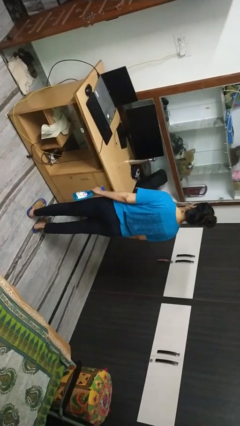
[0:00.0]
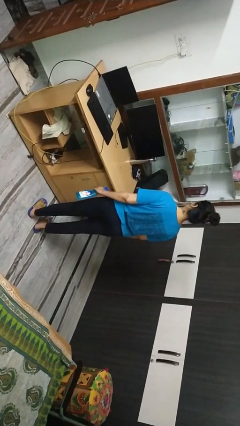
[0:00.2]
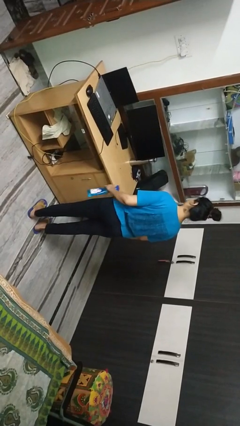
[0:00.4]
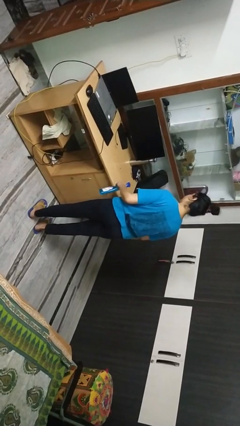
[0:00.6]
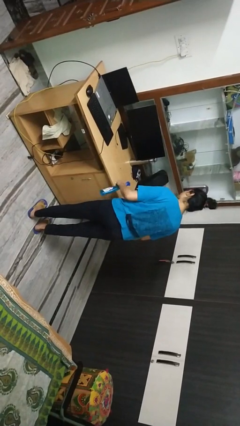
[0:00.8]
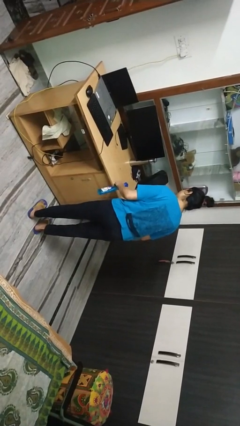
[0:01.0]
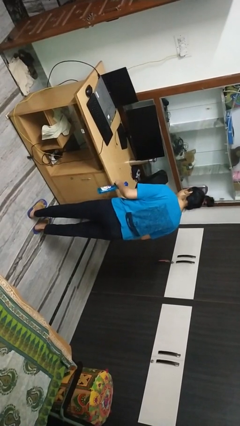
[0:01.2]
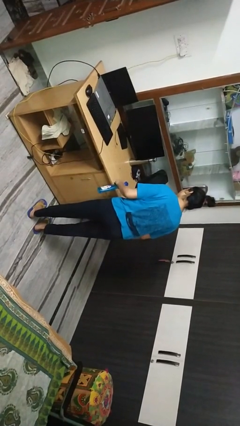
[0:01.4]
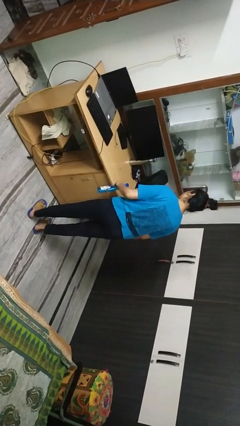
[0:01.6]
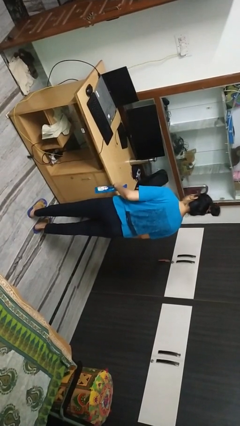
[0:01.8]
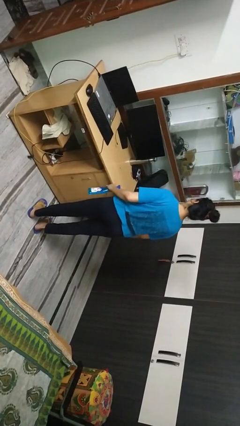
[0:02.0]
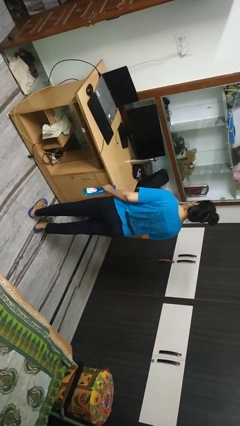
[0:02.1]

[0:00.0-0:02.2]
person sprays from bottle

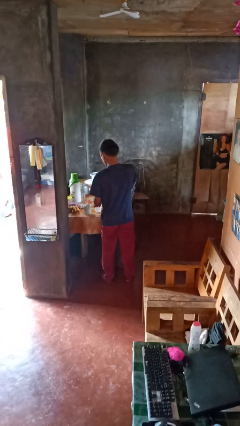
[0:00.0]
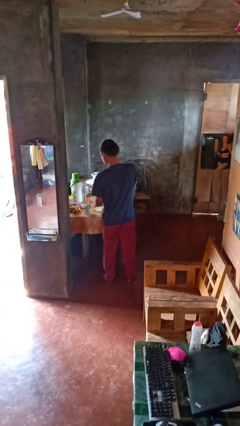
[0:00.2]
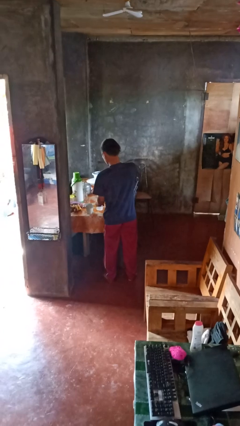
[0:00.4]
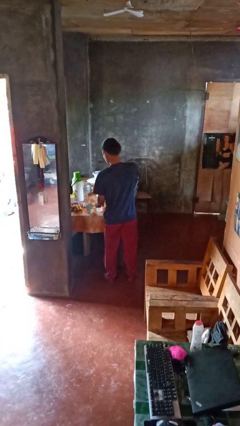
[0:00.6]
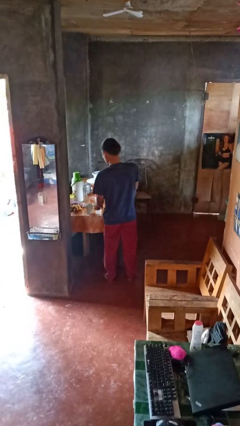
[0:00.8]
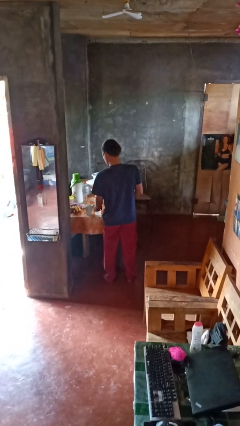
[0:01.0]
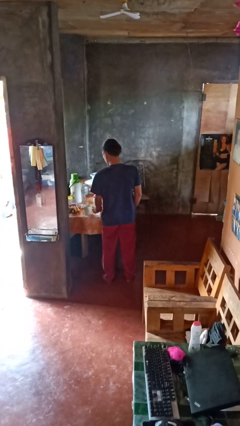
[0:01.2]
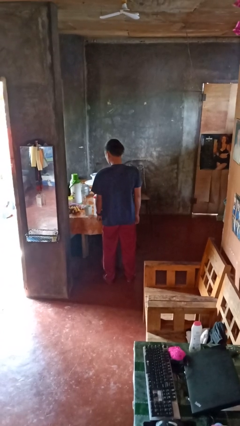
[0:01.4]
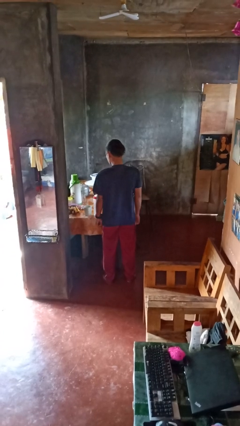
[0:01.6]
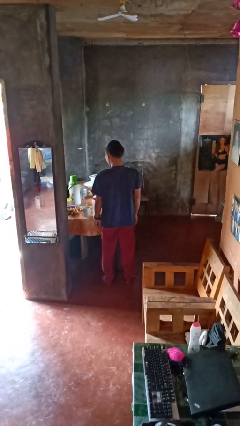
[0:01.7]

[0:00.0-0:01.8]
person screws lid to bottle

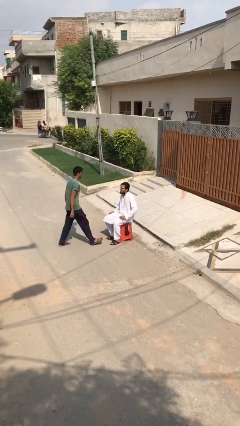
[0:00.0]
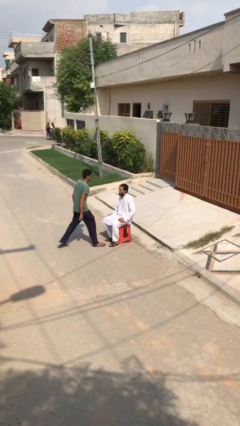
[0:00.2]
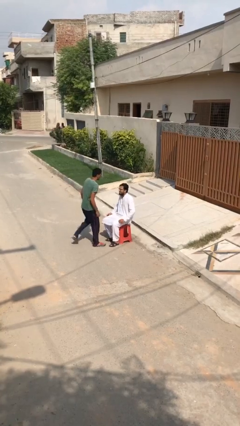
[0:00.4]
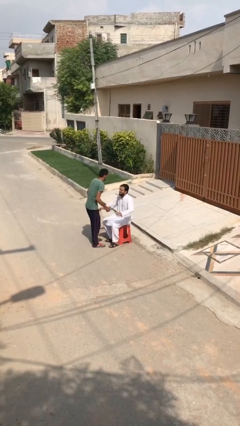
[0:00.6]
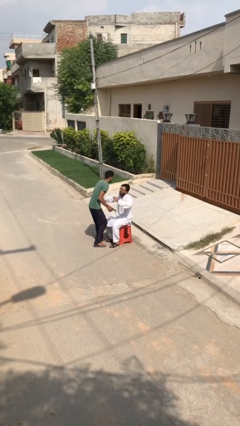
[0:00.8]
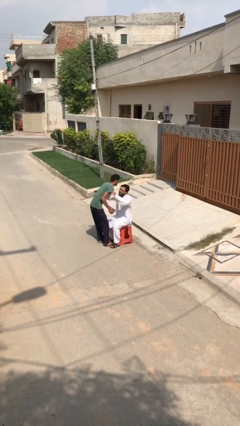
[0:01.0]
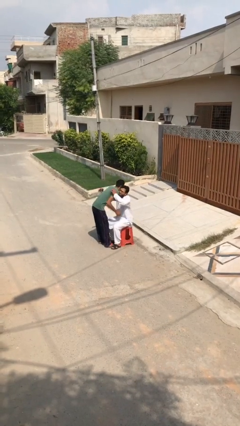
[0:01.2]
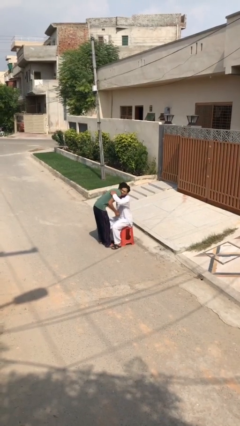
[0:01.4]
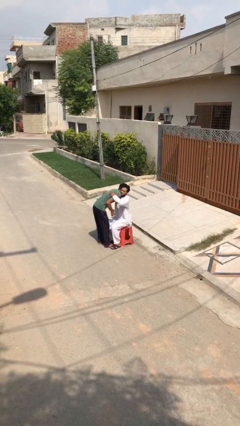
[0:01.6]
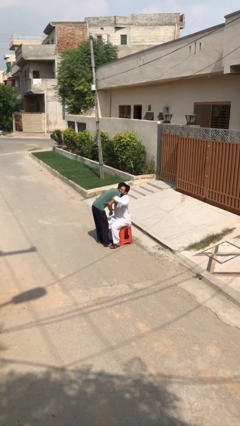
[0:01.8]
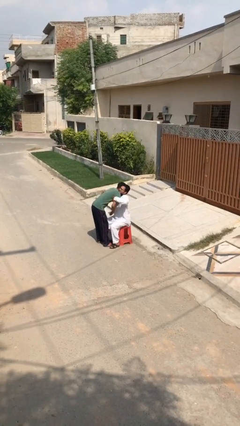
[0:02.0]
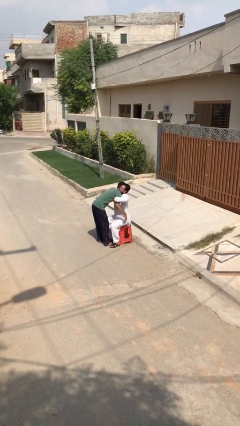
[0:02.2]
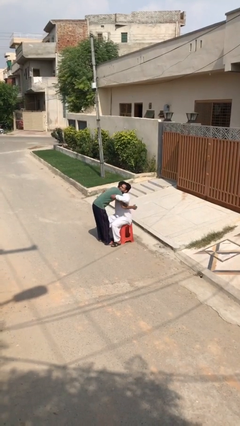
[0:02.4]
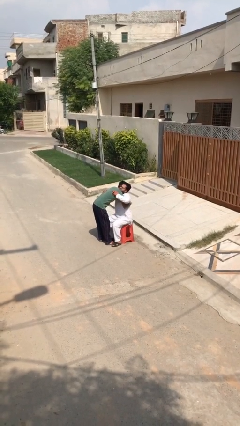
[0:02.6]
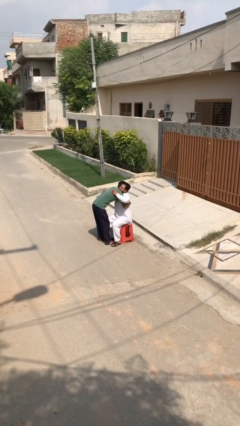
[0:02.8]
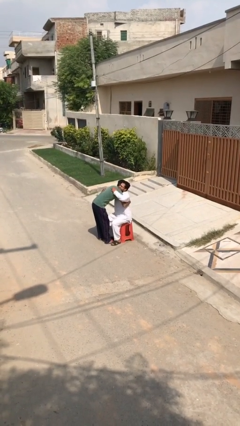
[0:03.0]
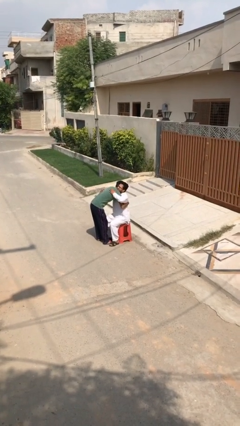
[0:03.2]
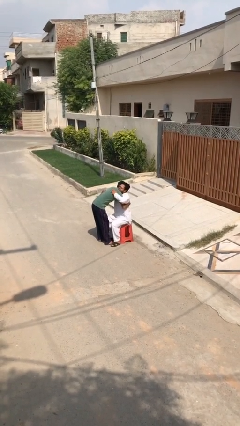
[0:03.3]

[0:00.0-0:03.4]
person embraces person

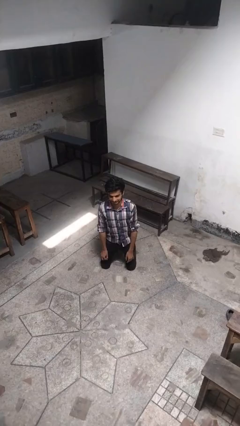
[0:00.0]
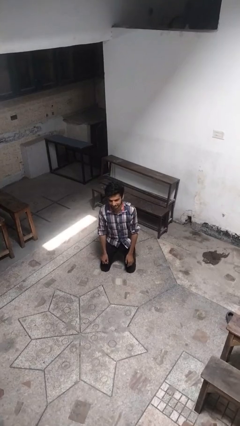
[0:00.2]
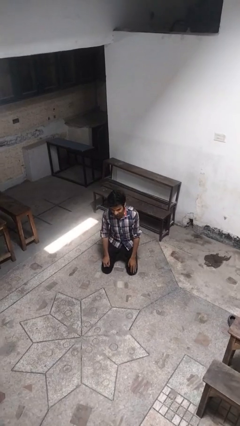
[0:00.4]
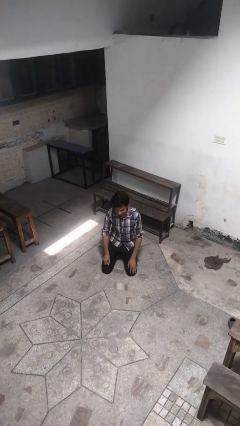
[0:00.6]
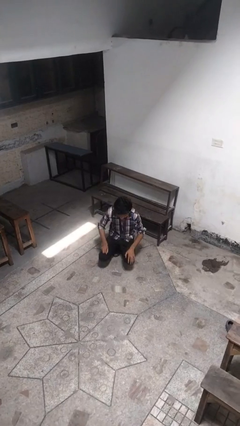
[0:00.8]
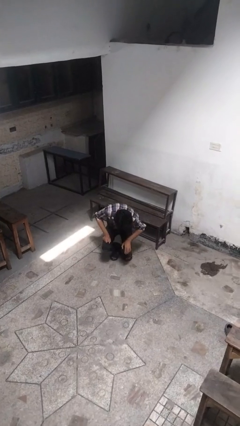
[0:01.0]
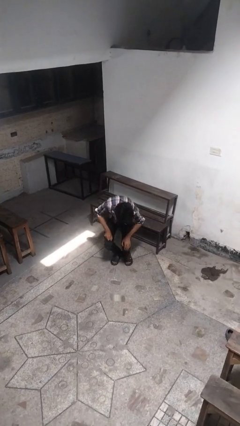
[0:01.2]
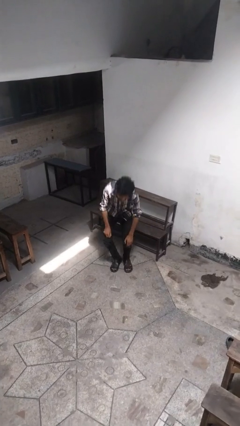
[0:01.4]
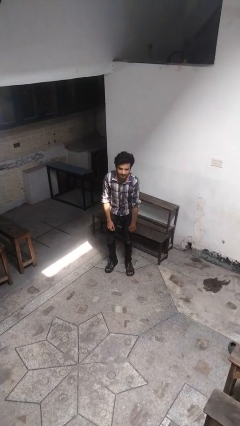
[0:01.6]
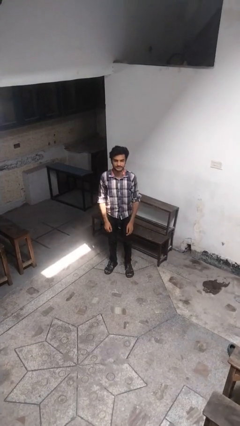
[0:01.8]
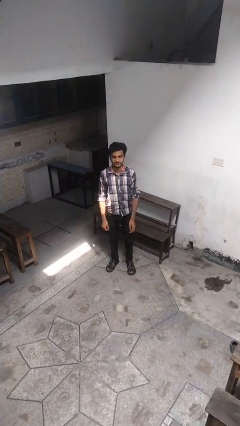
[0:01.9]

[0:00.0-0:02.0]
person stands up from floor

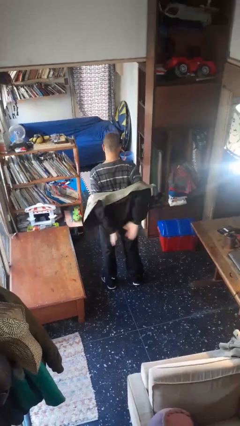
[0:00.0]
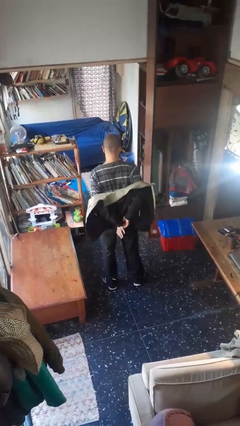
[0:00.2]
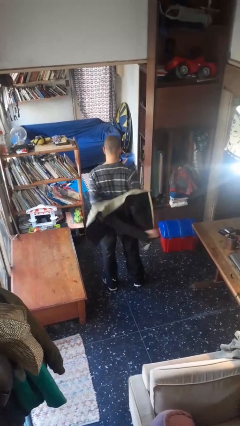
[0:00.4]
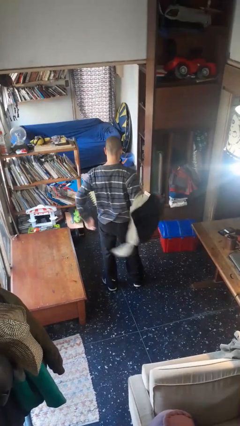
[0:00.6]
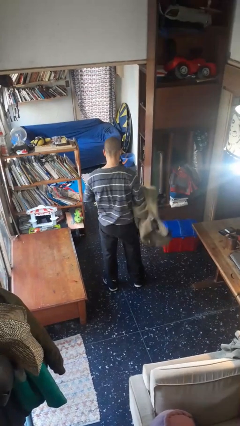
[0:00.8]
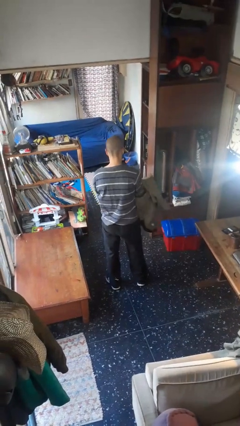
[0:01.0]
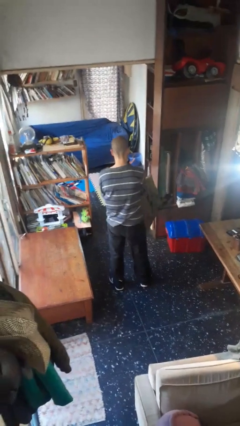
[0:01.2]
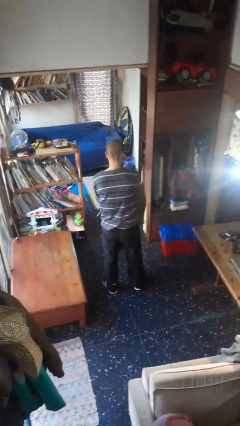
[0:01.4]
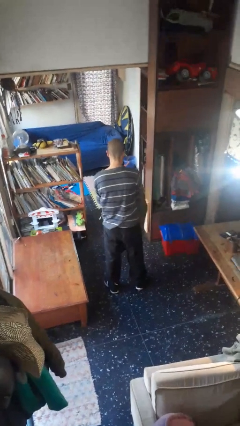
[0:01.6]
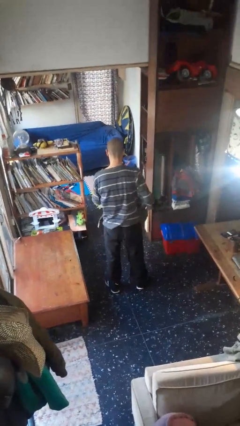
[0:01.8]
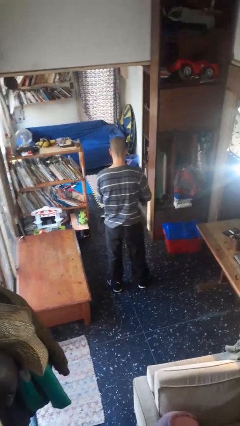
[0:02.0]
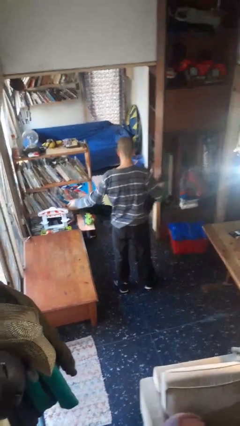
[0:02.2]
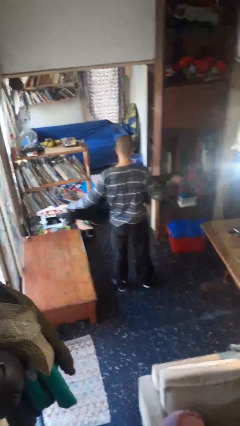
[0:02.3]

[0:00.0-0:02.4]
person takes off jacket

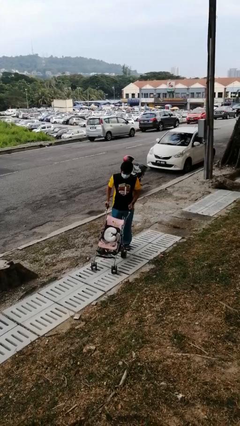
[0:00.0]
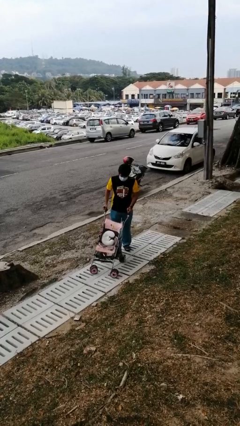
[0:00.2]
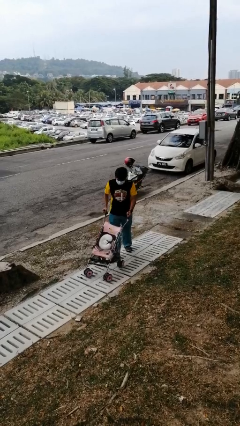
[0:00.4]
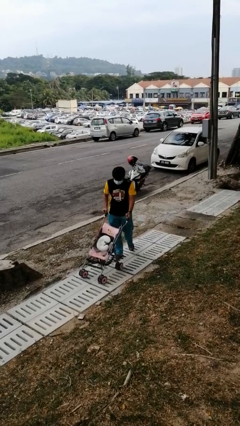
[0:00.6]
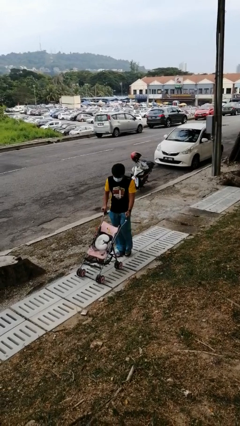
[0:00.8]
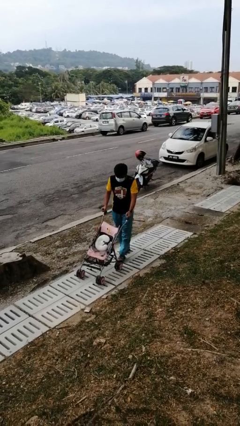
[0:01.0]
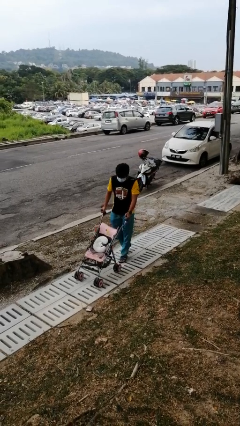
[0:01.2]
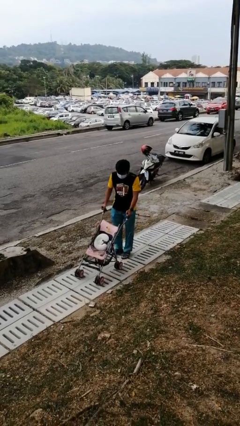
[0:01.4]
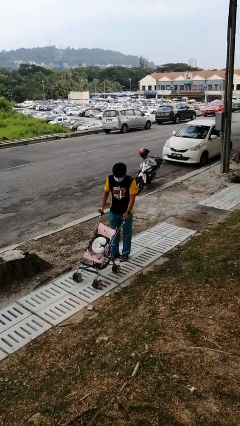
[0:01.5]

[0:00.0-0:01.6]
person pushes wheeled cart

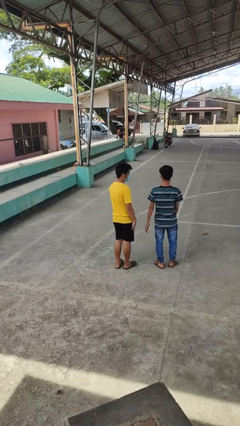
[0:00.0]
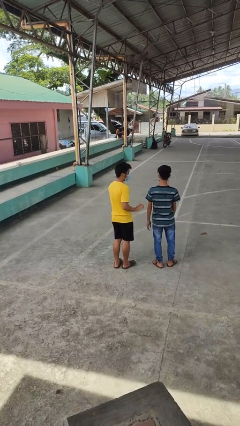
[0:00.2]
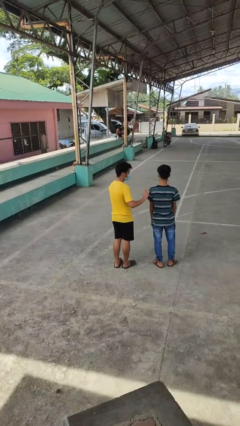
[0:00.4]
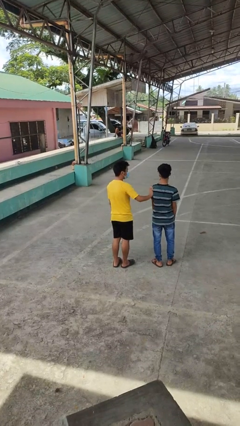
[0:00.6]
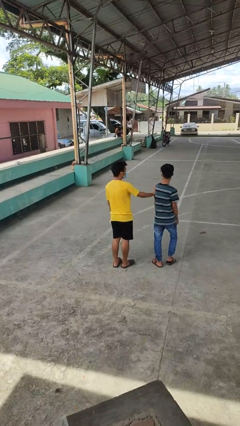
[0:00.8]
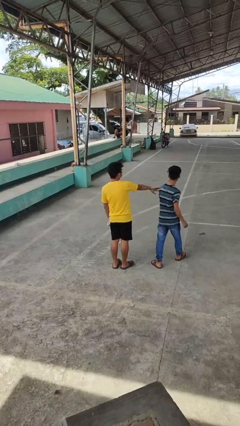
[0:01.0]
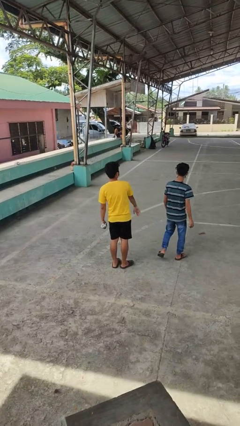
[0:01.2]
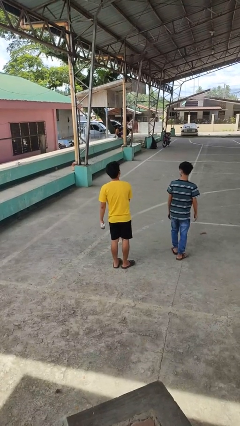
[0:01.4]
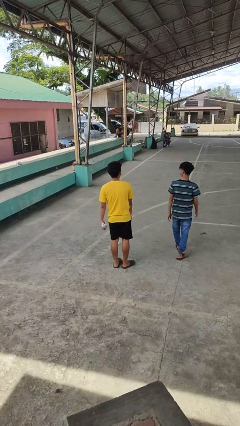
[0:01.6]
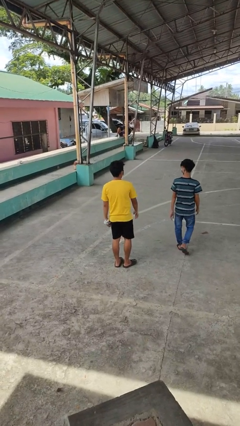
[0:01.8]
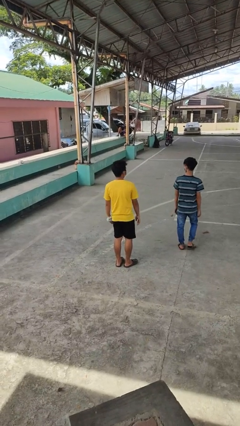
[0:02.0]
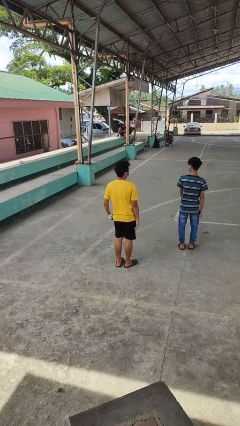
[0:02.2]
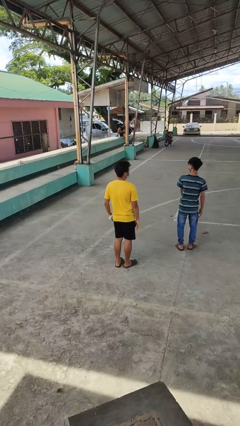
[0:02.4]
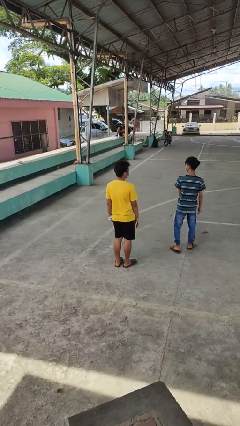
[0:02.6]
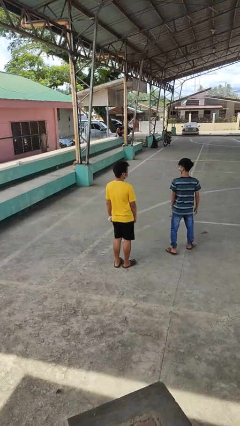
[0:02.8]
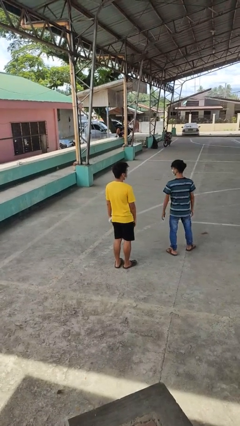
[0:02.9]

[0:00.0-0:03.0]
person shoves person

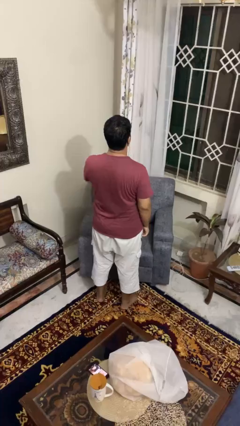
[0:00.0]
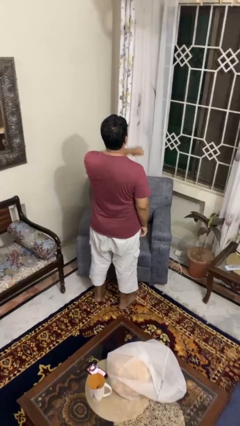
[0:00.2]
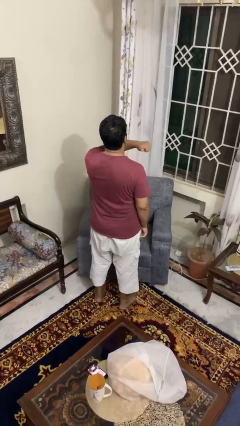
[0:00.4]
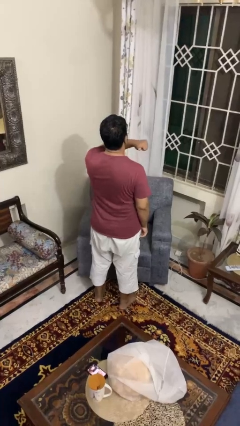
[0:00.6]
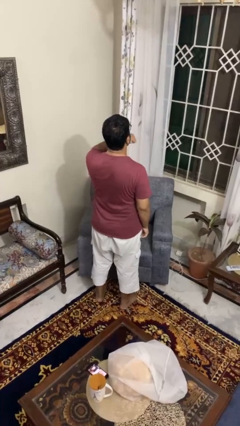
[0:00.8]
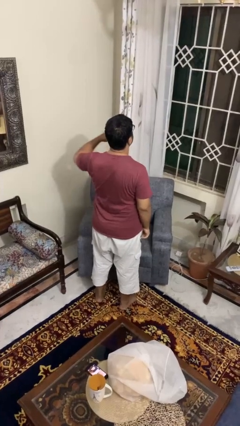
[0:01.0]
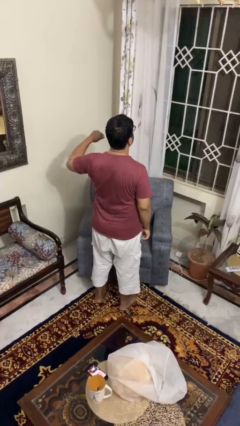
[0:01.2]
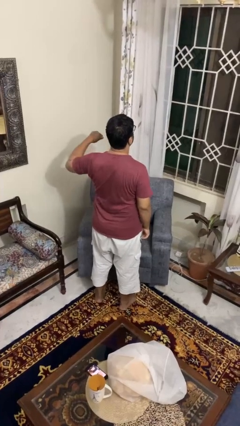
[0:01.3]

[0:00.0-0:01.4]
person gestures cut
